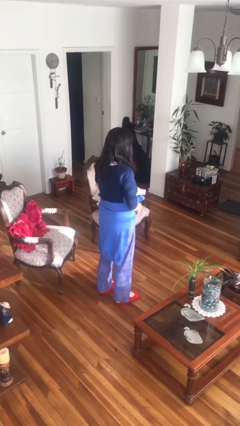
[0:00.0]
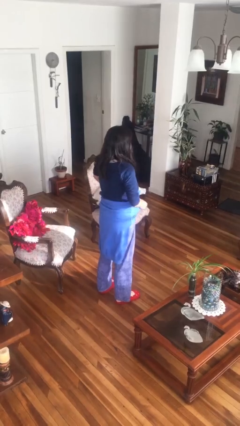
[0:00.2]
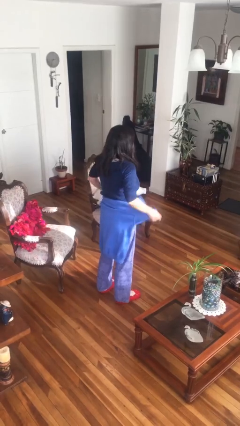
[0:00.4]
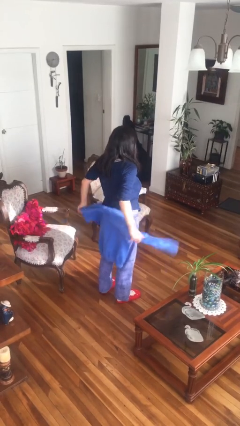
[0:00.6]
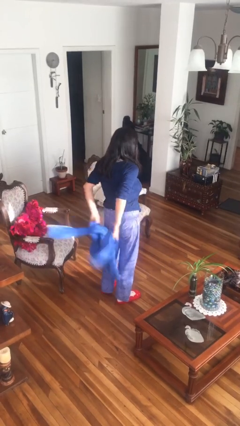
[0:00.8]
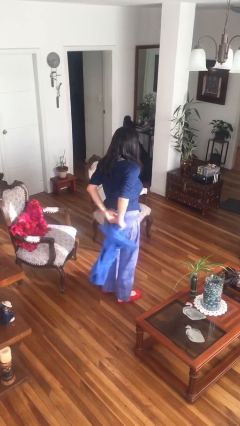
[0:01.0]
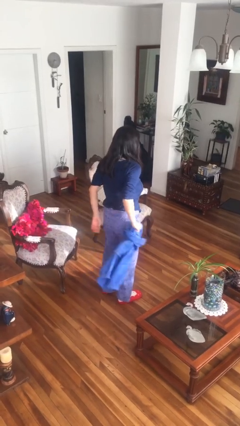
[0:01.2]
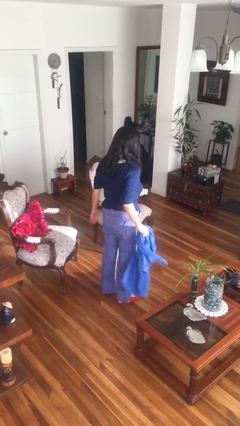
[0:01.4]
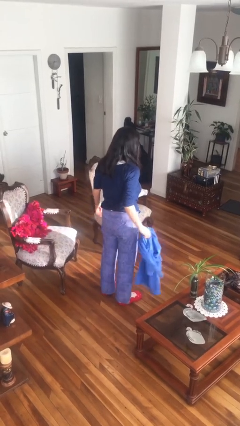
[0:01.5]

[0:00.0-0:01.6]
person unties jacket around waist

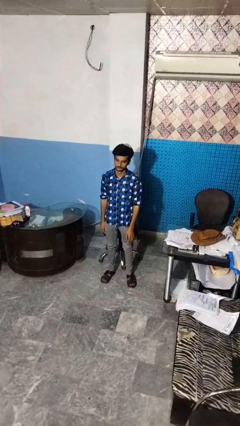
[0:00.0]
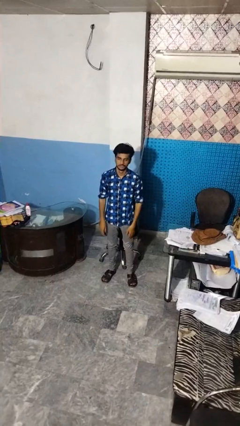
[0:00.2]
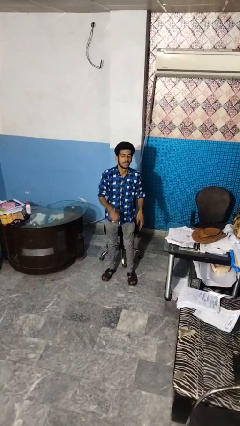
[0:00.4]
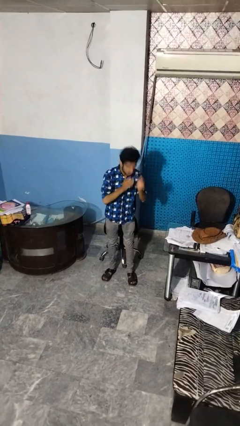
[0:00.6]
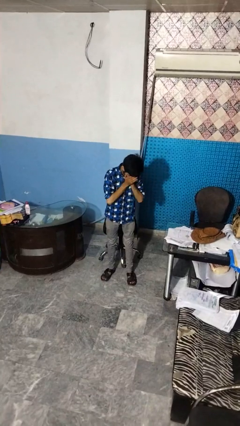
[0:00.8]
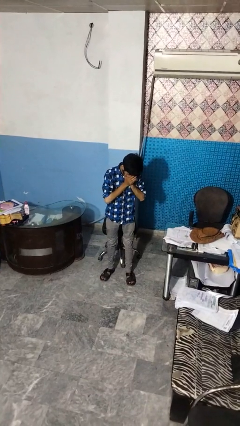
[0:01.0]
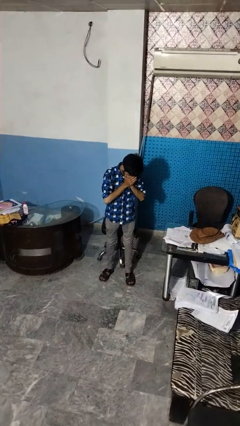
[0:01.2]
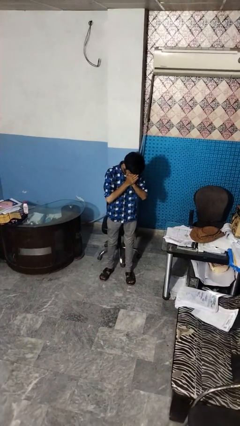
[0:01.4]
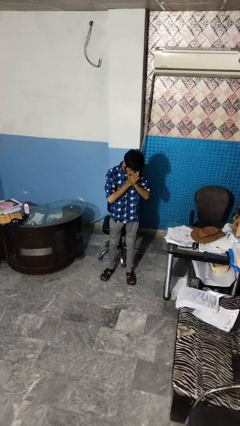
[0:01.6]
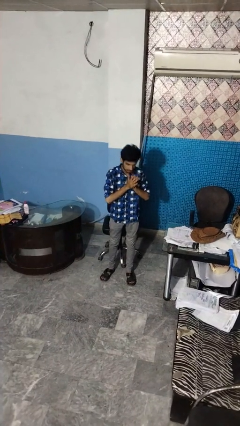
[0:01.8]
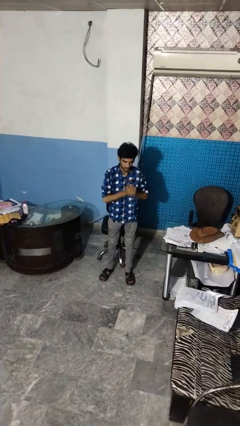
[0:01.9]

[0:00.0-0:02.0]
person sneezes into hand

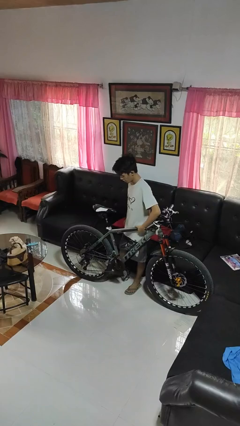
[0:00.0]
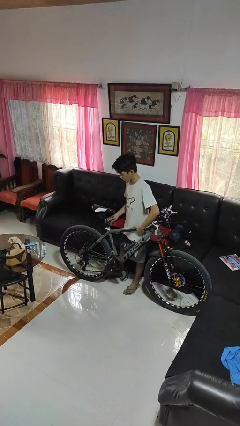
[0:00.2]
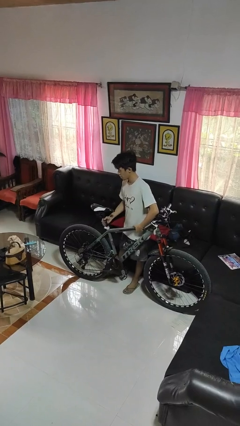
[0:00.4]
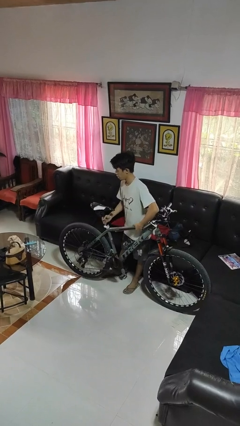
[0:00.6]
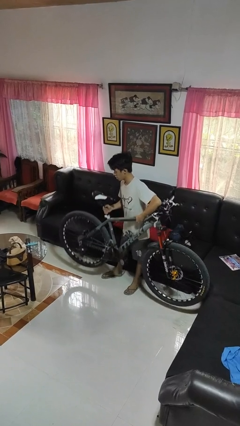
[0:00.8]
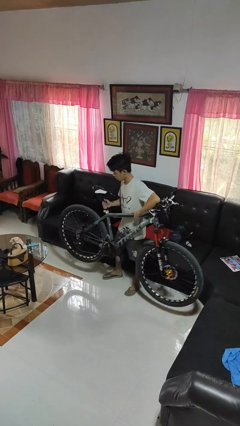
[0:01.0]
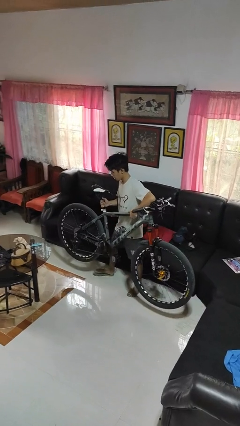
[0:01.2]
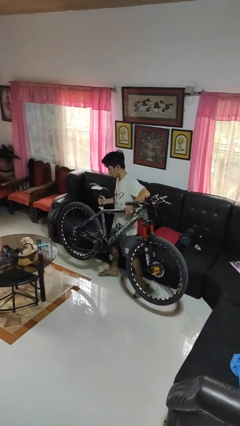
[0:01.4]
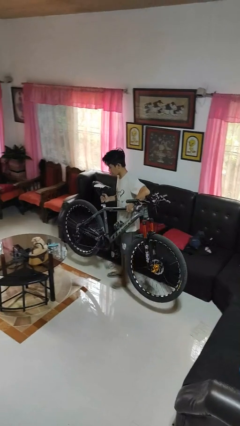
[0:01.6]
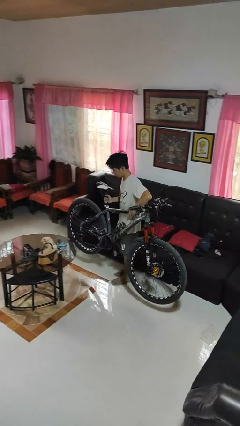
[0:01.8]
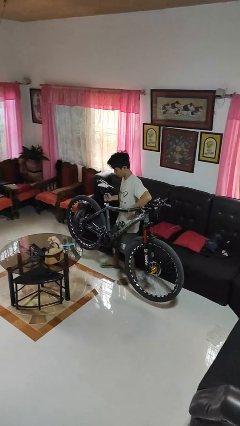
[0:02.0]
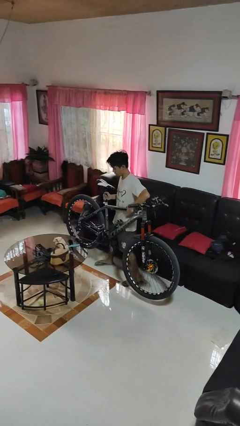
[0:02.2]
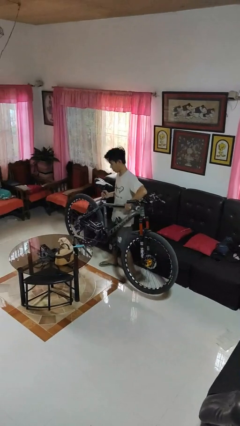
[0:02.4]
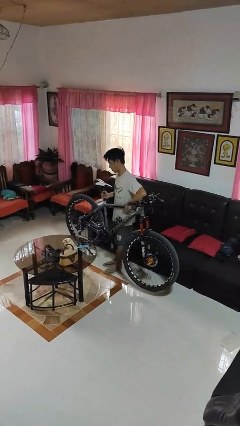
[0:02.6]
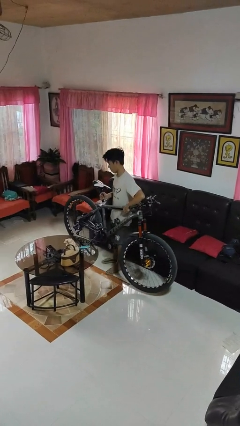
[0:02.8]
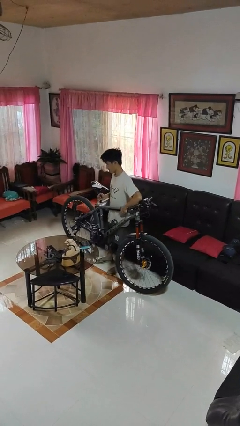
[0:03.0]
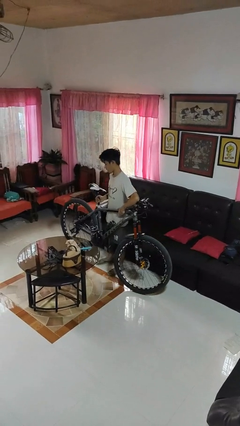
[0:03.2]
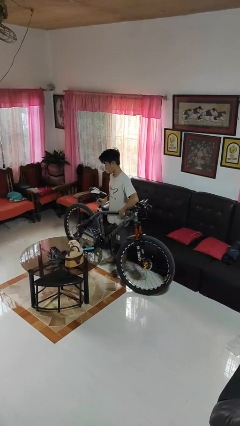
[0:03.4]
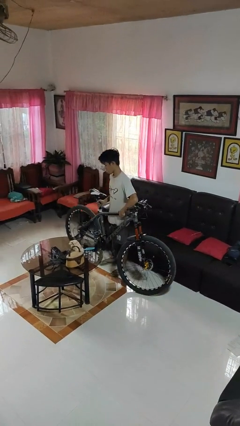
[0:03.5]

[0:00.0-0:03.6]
person carries bicycle

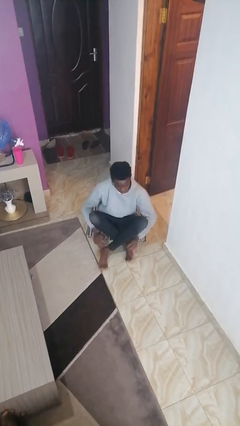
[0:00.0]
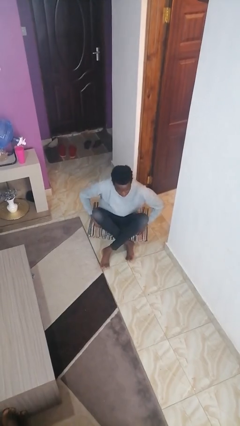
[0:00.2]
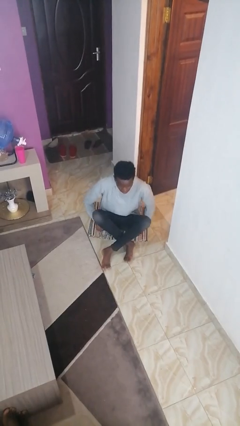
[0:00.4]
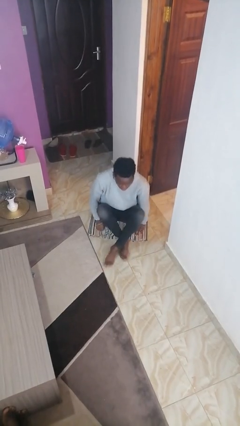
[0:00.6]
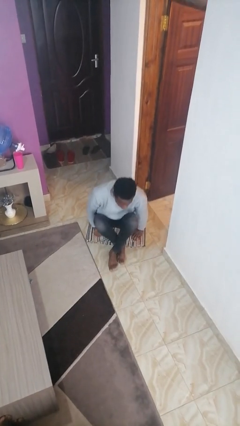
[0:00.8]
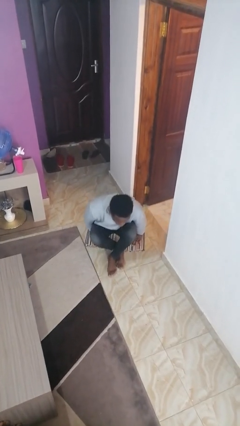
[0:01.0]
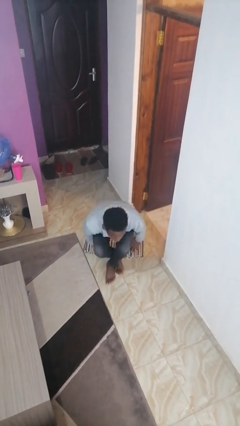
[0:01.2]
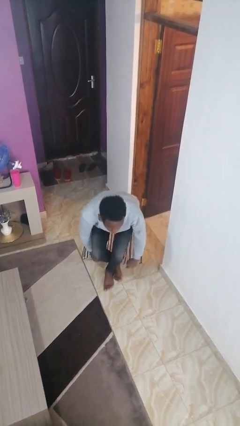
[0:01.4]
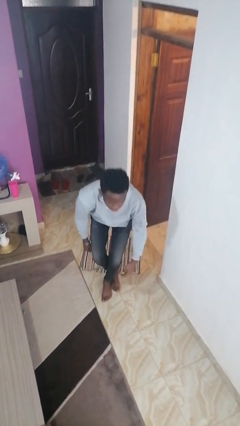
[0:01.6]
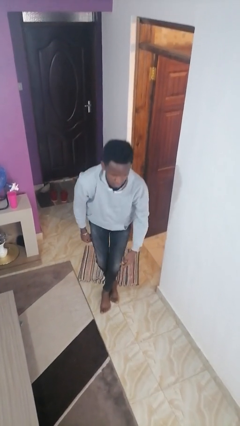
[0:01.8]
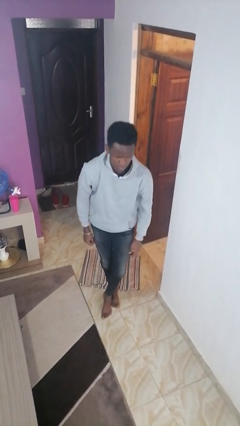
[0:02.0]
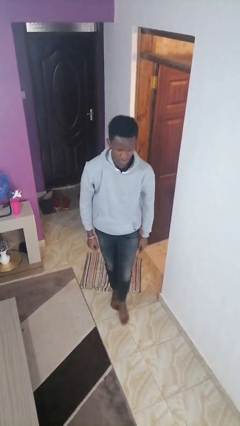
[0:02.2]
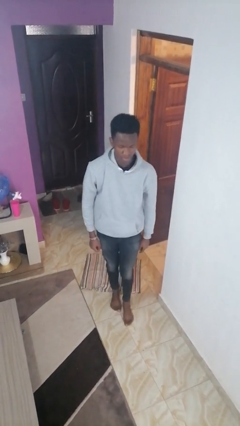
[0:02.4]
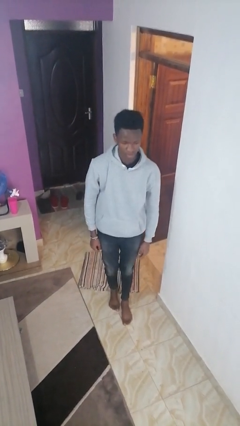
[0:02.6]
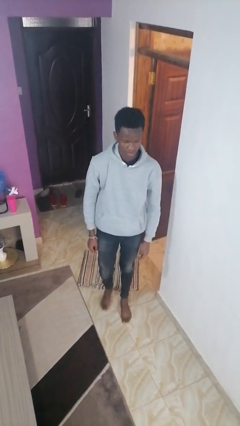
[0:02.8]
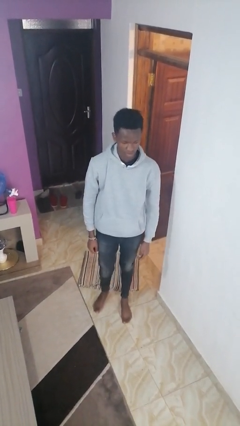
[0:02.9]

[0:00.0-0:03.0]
person stands up from floor

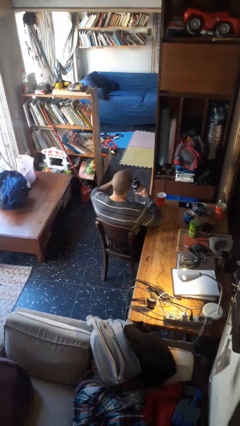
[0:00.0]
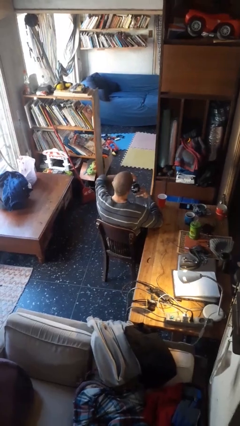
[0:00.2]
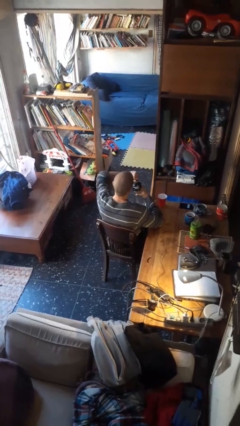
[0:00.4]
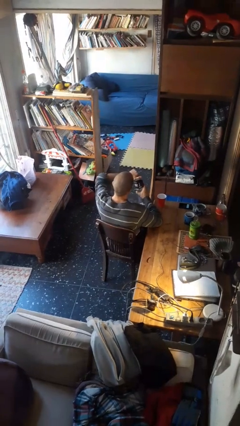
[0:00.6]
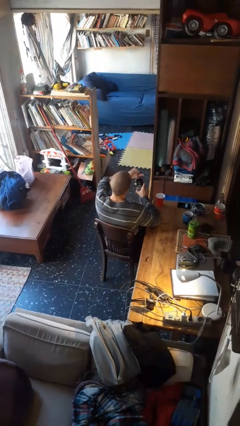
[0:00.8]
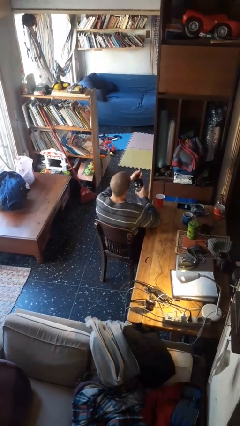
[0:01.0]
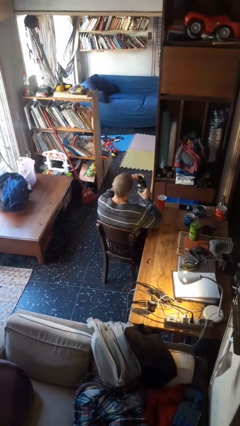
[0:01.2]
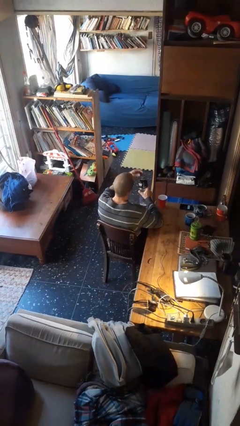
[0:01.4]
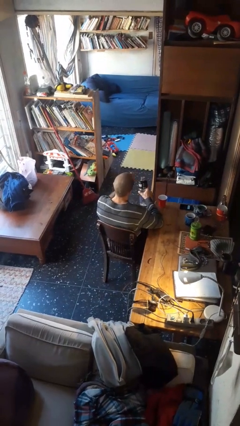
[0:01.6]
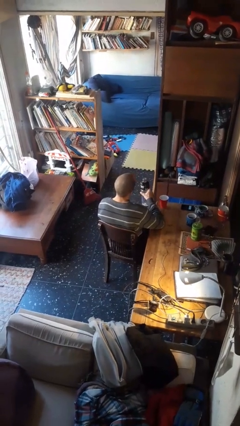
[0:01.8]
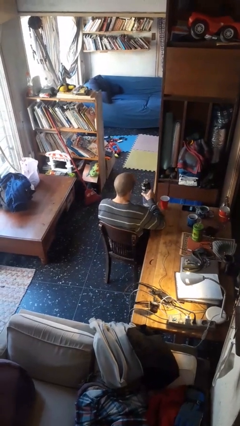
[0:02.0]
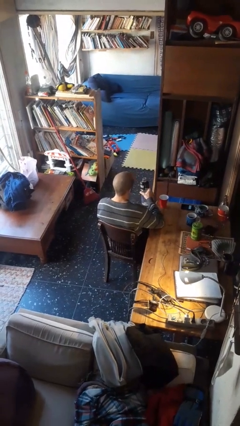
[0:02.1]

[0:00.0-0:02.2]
person unscrews lid from bottle

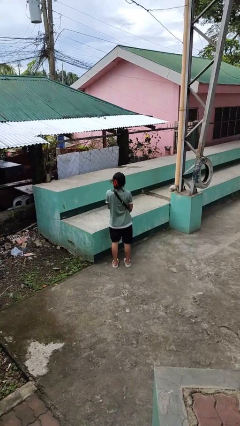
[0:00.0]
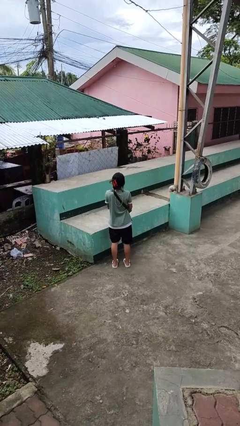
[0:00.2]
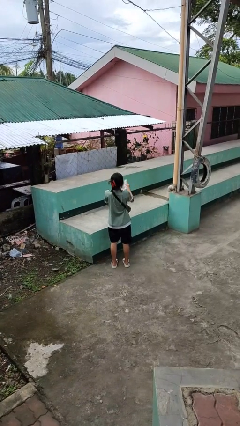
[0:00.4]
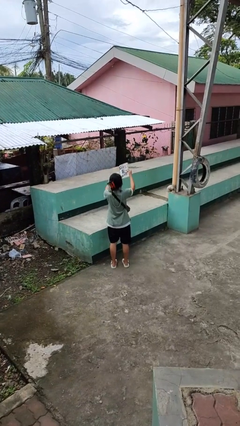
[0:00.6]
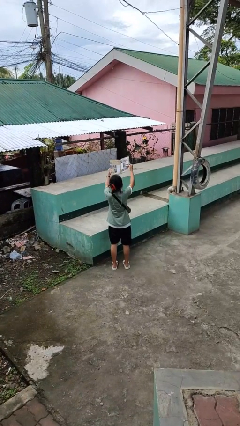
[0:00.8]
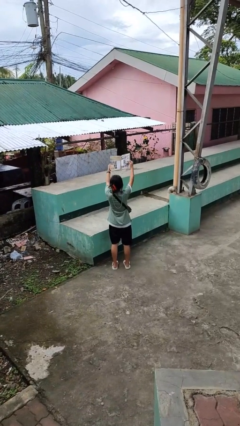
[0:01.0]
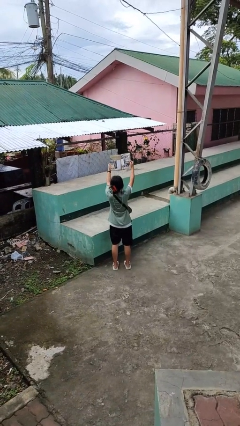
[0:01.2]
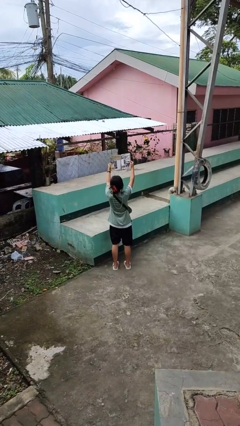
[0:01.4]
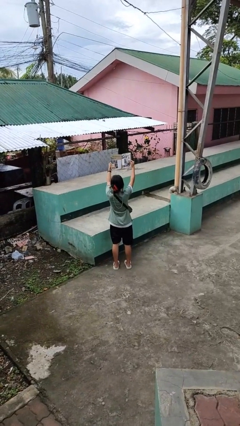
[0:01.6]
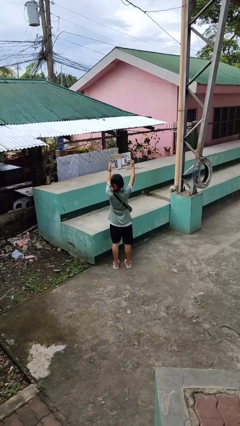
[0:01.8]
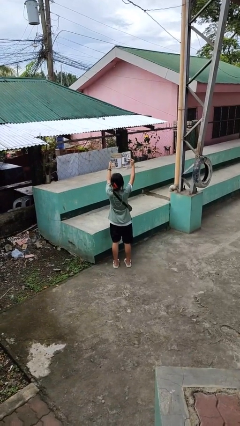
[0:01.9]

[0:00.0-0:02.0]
person reads magazine

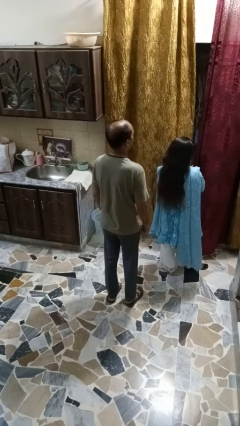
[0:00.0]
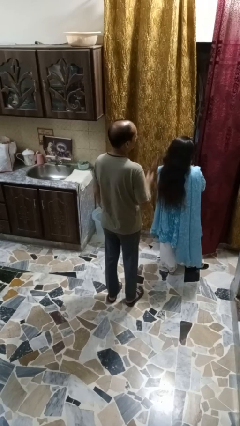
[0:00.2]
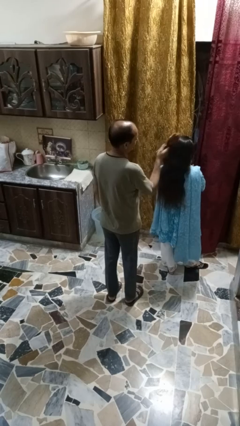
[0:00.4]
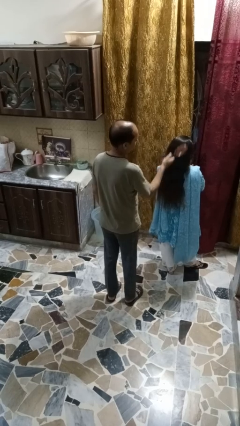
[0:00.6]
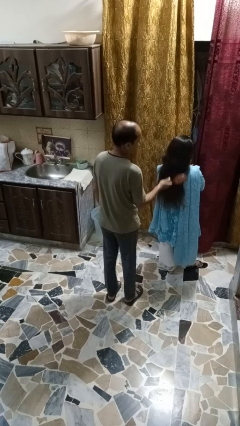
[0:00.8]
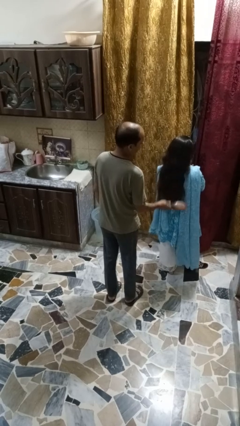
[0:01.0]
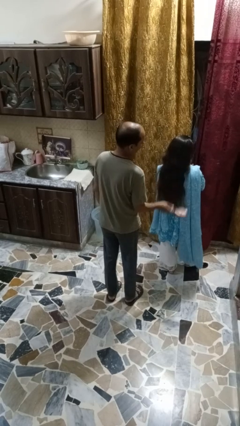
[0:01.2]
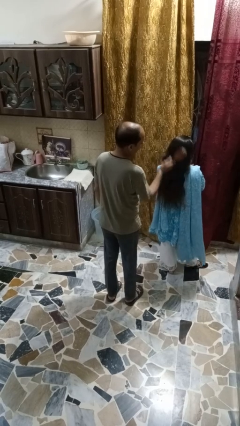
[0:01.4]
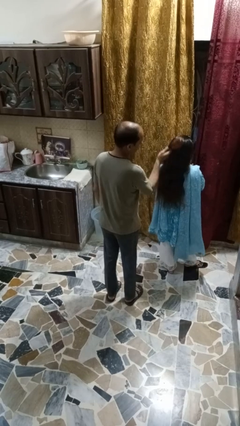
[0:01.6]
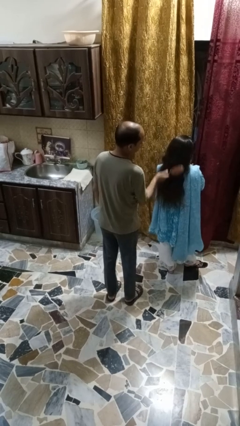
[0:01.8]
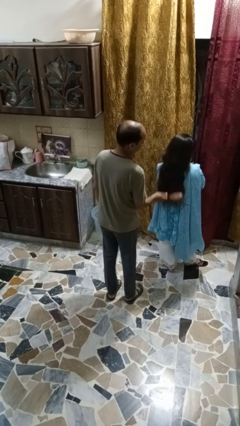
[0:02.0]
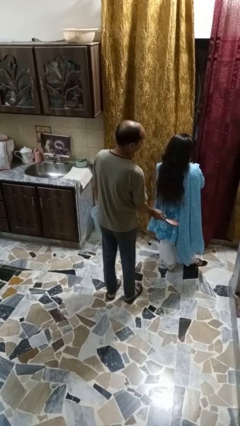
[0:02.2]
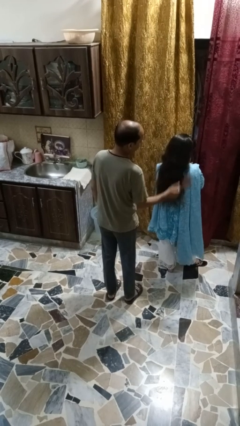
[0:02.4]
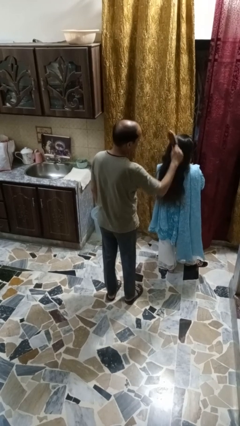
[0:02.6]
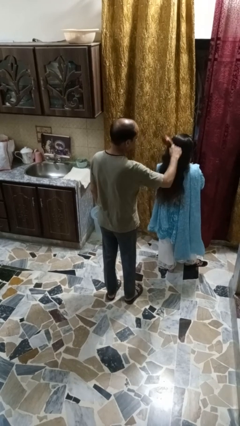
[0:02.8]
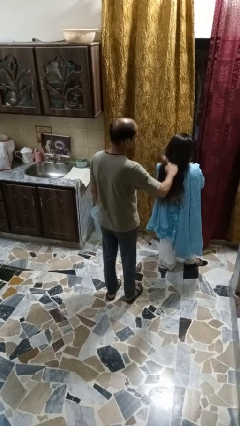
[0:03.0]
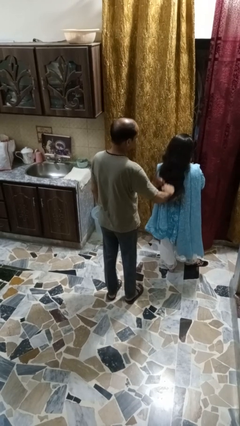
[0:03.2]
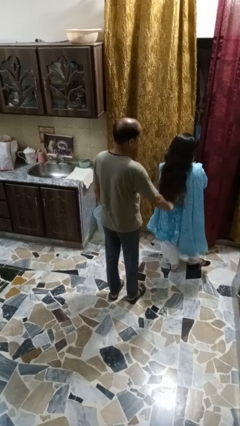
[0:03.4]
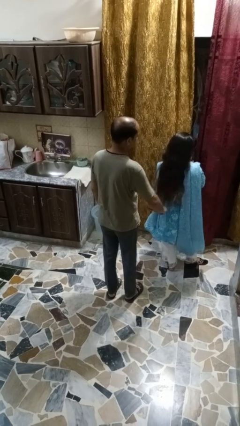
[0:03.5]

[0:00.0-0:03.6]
person brushes hair of person
